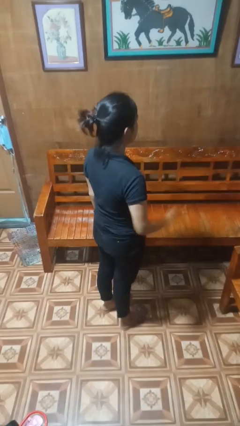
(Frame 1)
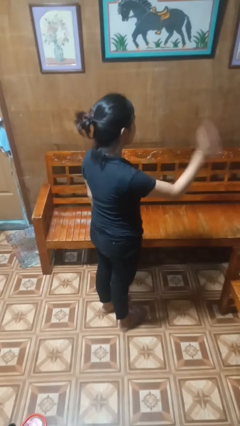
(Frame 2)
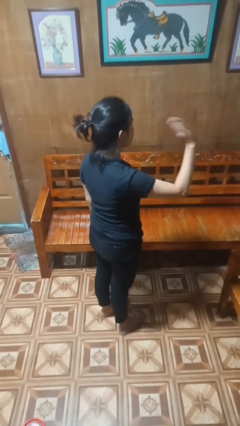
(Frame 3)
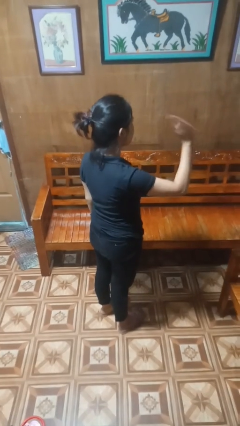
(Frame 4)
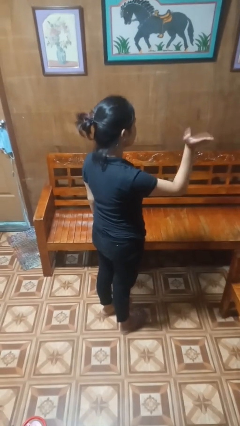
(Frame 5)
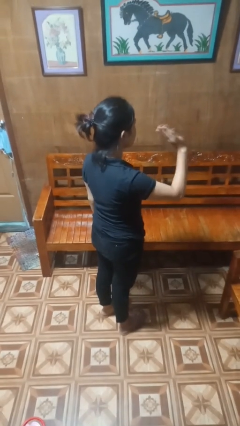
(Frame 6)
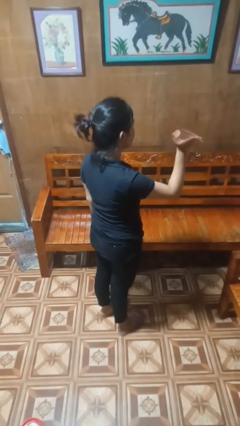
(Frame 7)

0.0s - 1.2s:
person waves at person

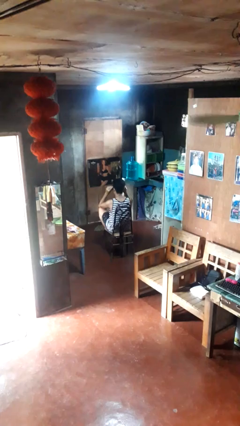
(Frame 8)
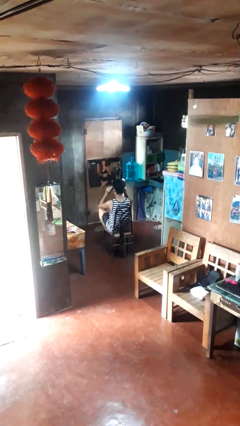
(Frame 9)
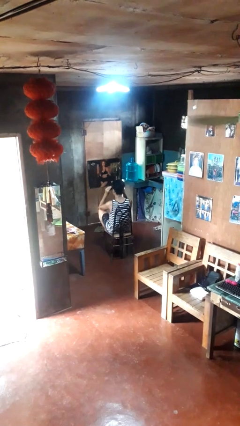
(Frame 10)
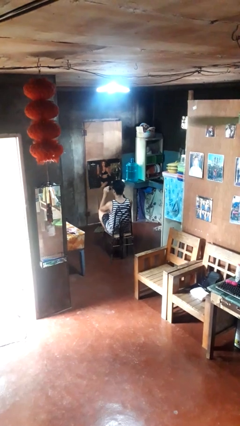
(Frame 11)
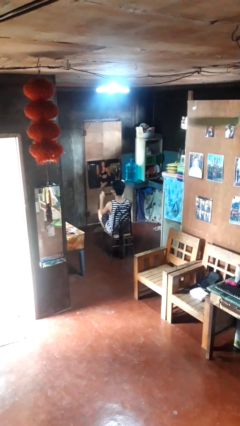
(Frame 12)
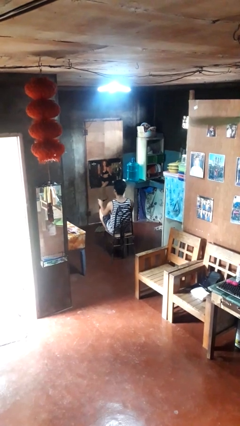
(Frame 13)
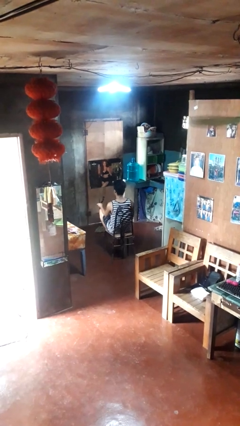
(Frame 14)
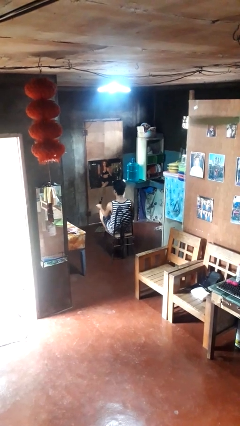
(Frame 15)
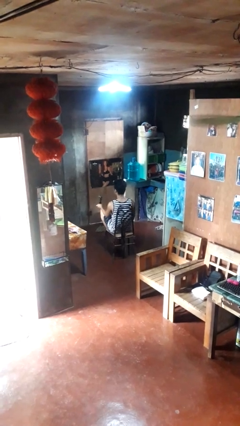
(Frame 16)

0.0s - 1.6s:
person takes off sunglasses

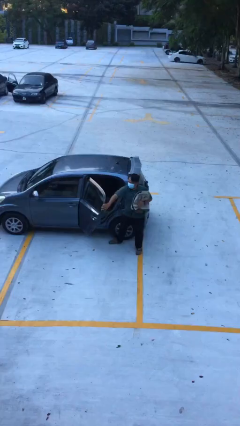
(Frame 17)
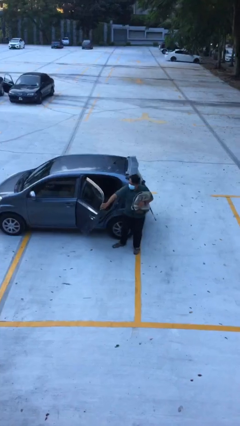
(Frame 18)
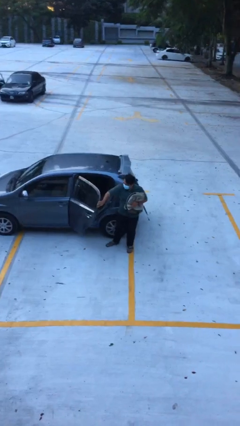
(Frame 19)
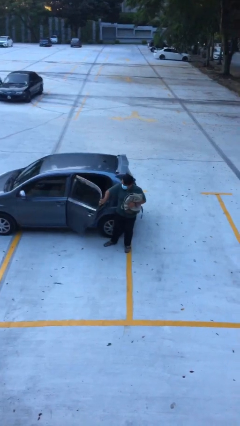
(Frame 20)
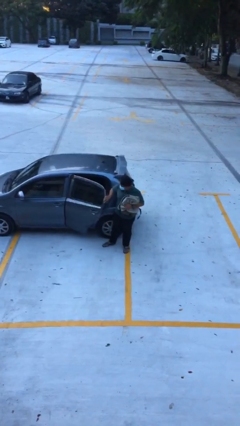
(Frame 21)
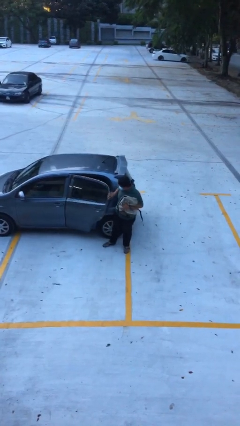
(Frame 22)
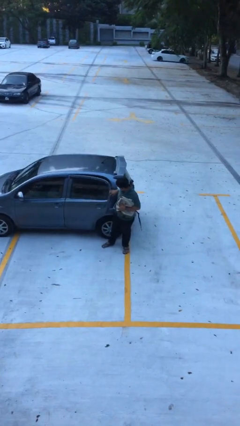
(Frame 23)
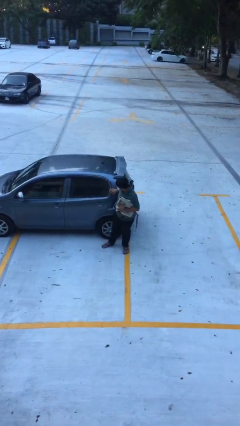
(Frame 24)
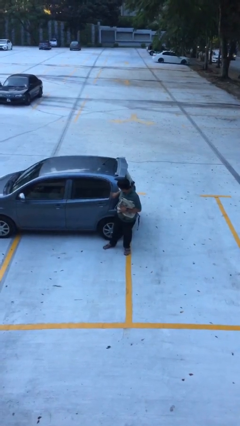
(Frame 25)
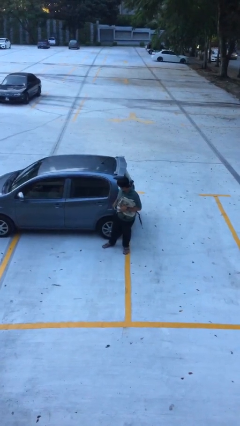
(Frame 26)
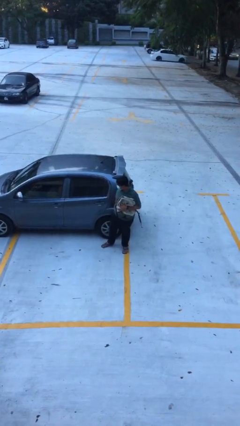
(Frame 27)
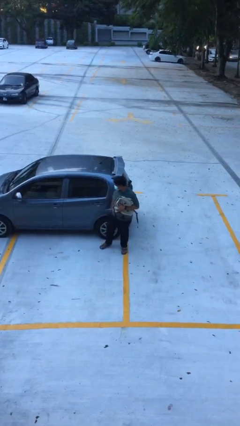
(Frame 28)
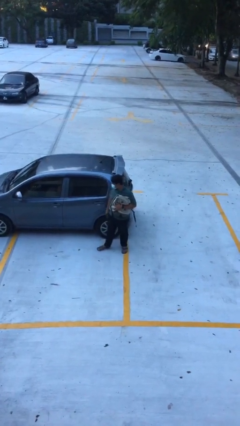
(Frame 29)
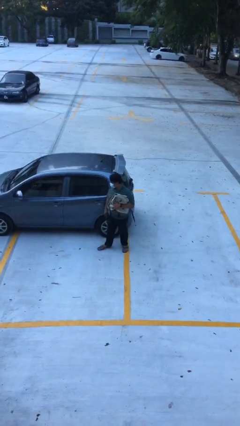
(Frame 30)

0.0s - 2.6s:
person closes car door

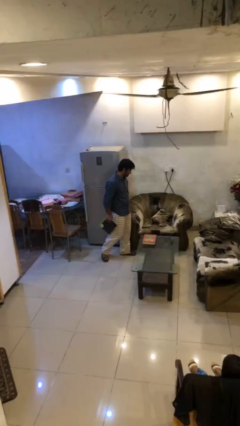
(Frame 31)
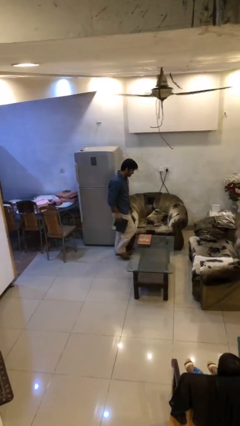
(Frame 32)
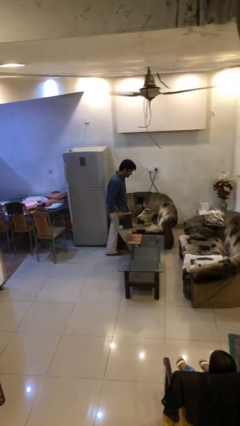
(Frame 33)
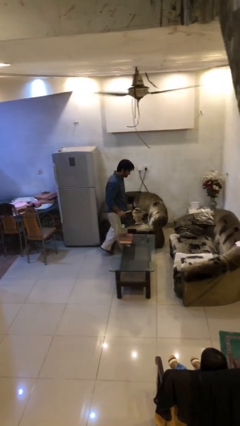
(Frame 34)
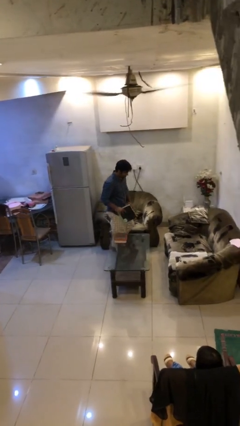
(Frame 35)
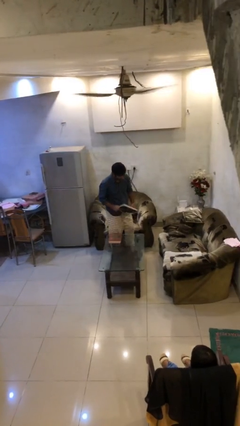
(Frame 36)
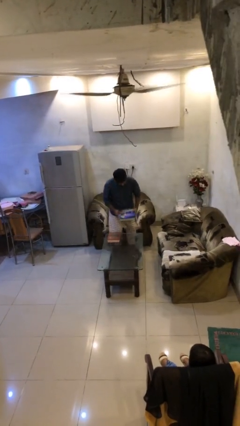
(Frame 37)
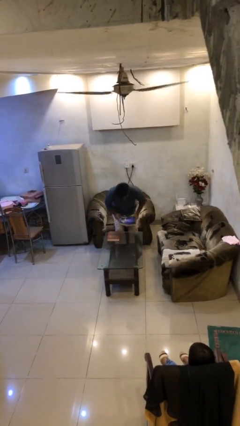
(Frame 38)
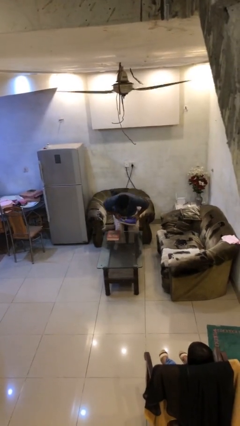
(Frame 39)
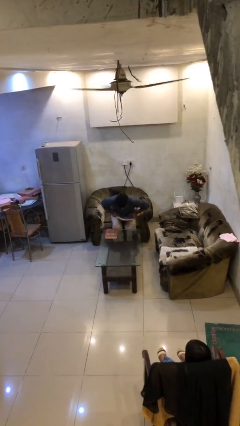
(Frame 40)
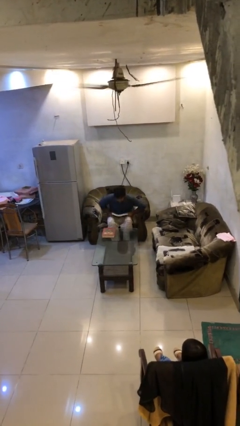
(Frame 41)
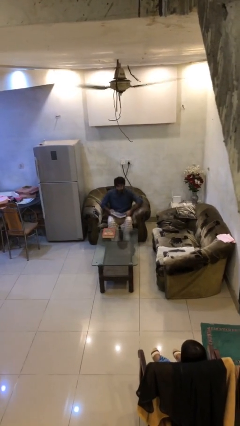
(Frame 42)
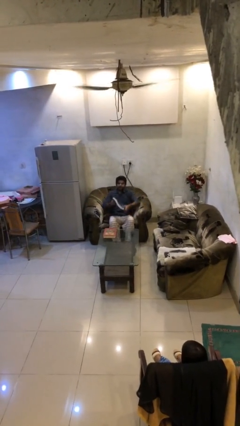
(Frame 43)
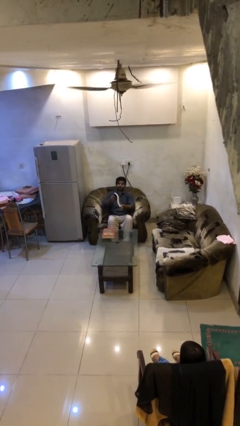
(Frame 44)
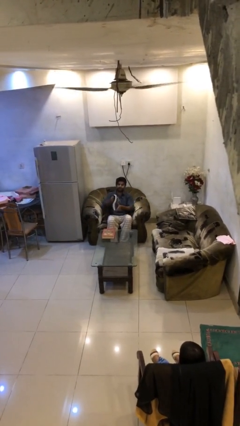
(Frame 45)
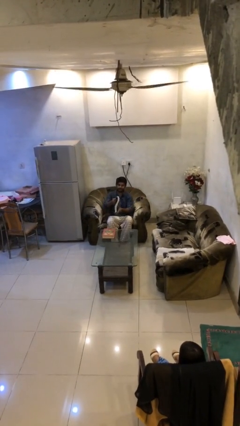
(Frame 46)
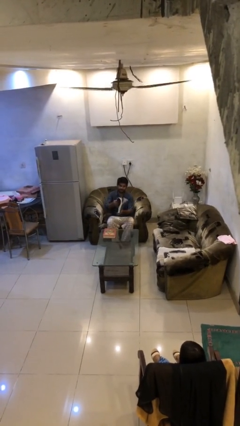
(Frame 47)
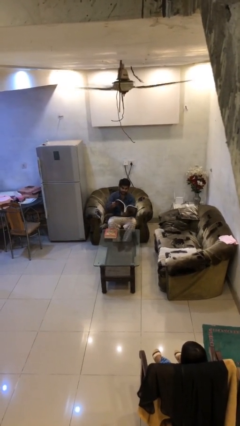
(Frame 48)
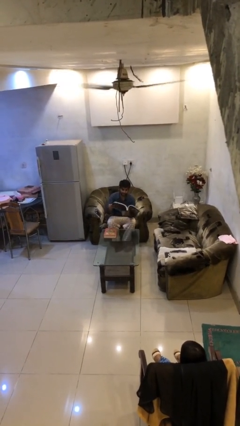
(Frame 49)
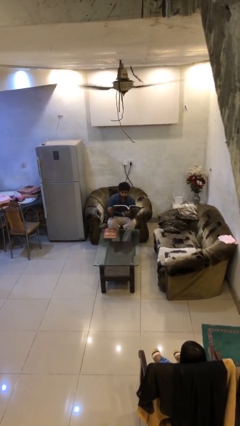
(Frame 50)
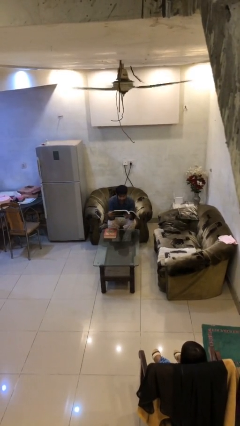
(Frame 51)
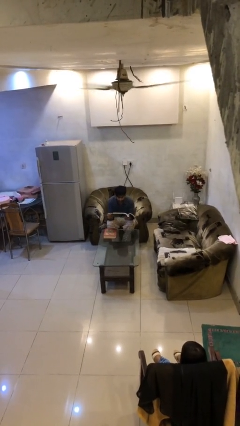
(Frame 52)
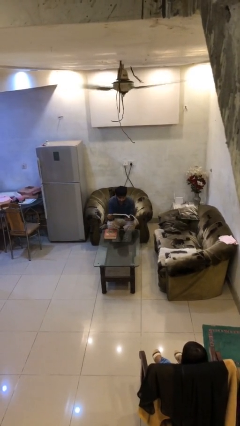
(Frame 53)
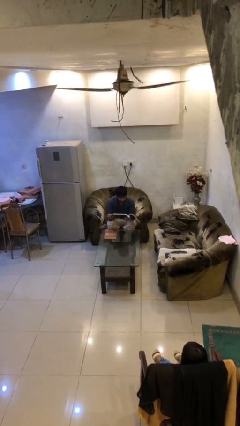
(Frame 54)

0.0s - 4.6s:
person sits down

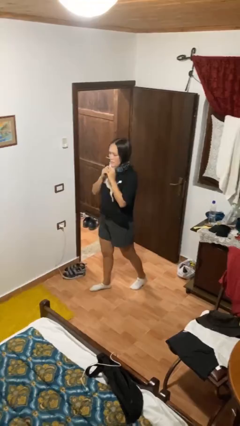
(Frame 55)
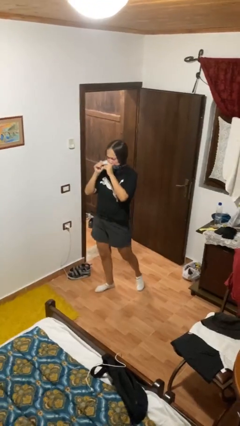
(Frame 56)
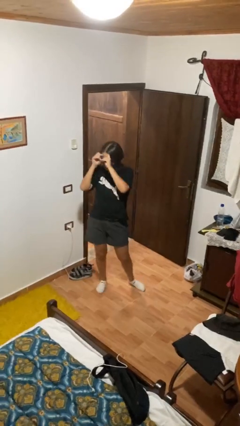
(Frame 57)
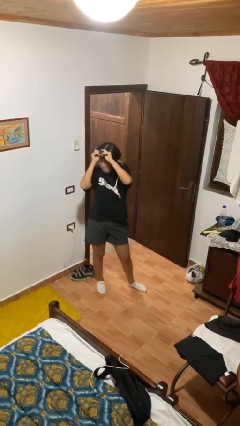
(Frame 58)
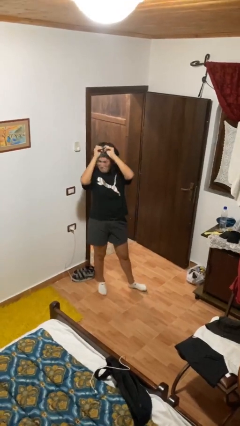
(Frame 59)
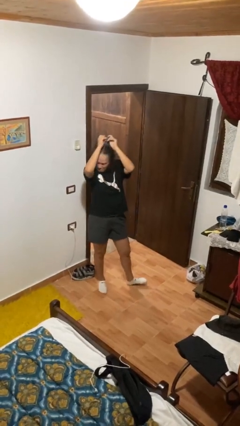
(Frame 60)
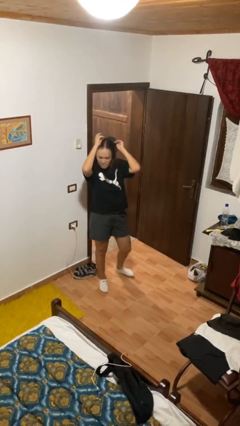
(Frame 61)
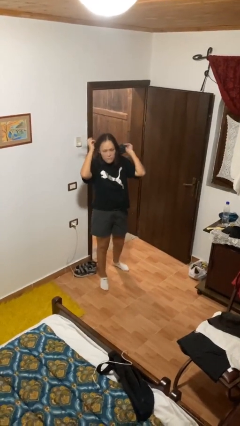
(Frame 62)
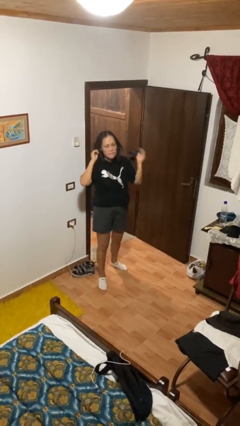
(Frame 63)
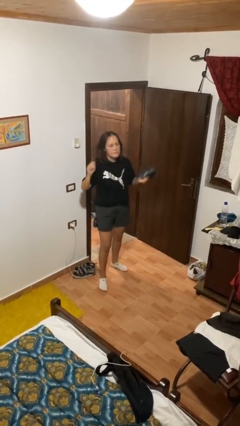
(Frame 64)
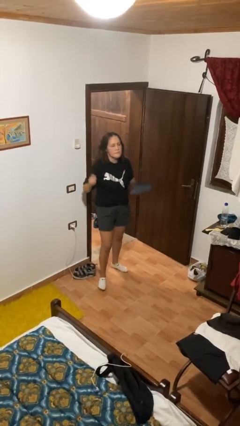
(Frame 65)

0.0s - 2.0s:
person takes off scarf

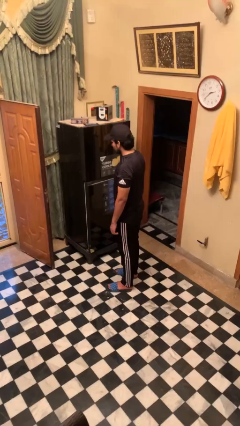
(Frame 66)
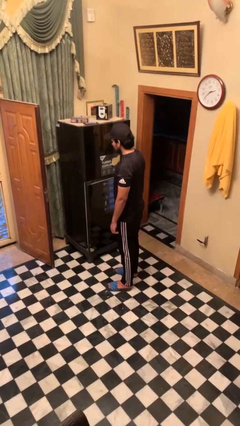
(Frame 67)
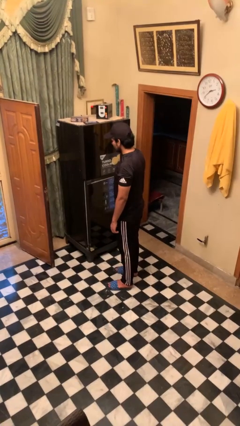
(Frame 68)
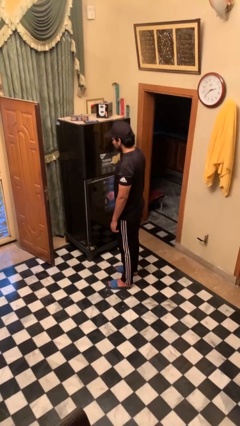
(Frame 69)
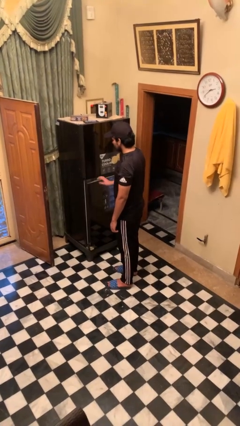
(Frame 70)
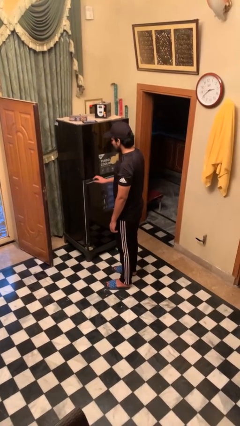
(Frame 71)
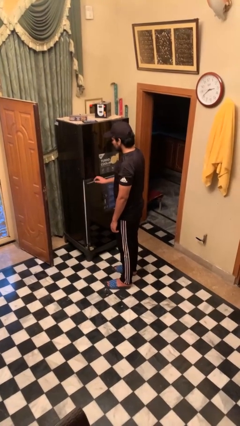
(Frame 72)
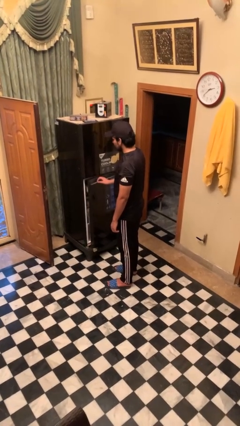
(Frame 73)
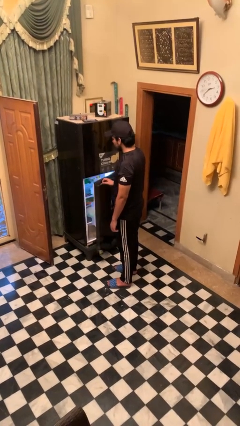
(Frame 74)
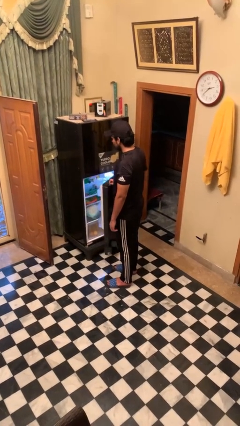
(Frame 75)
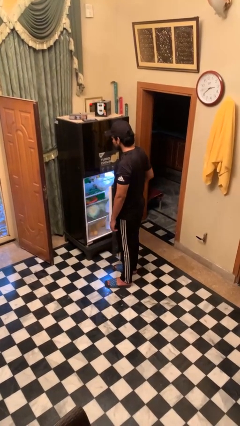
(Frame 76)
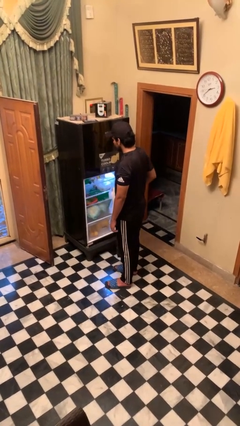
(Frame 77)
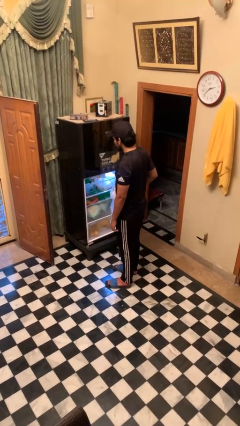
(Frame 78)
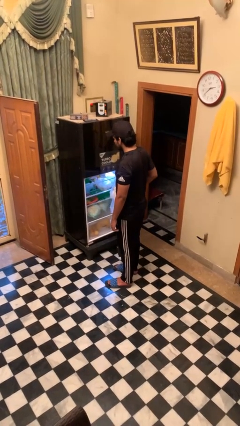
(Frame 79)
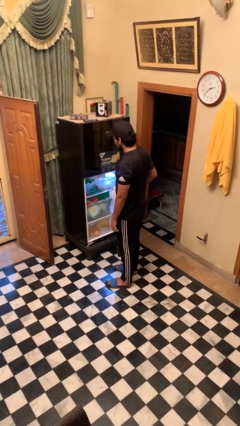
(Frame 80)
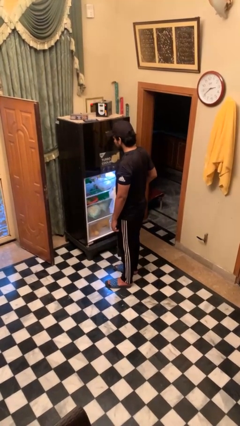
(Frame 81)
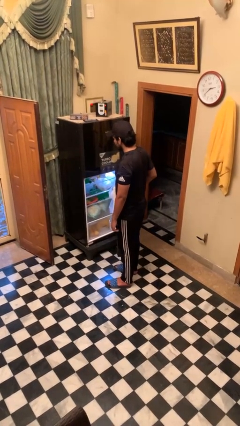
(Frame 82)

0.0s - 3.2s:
person opens refrigerator

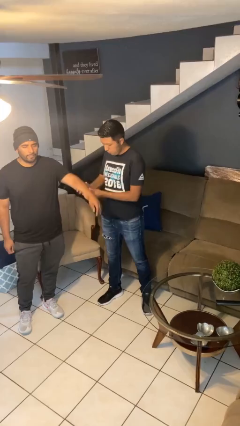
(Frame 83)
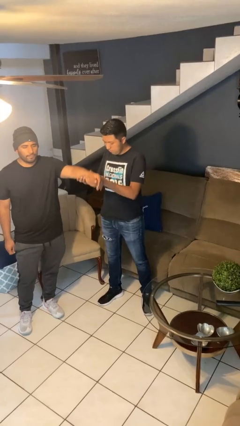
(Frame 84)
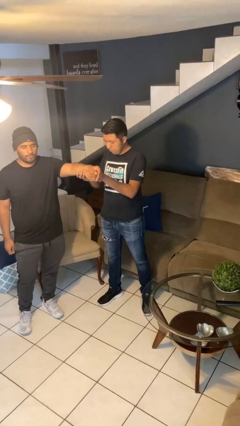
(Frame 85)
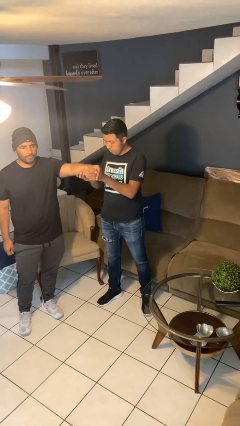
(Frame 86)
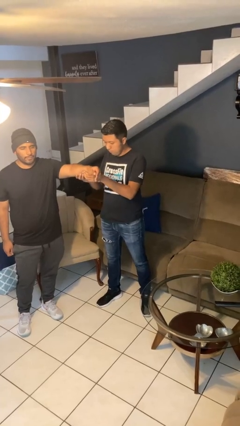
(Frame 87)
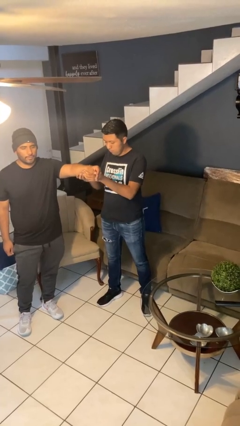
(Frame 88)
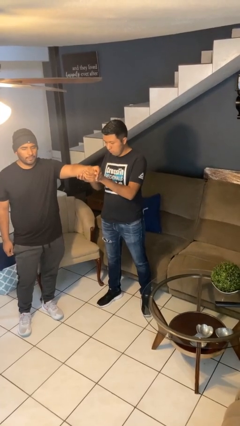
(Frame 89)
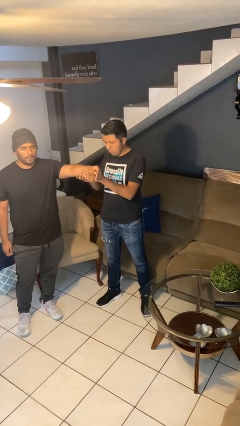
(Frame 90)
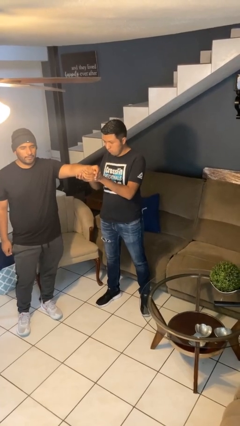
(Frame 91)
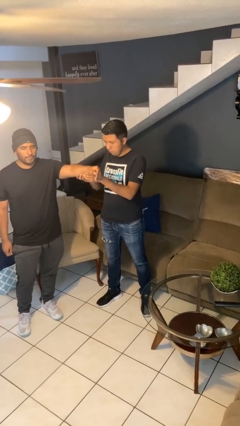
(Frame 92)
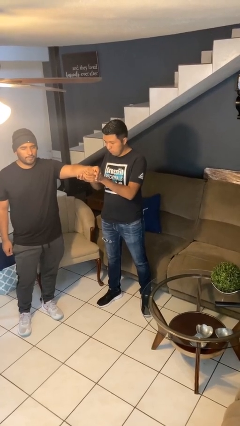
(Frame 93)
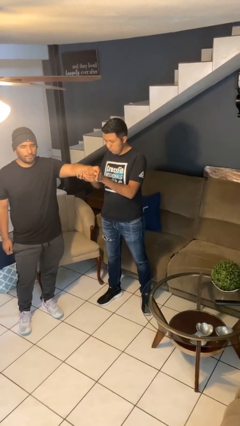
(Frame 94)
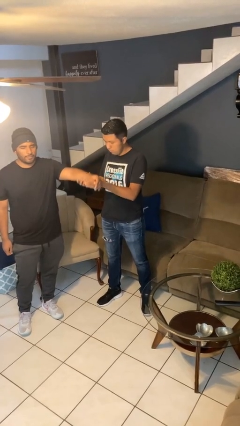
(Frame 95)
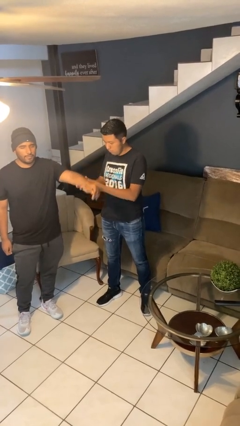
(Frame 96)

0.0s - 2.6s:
person grabs person by forearm
